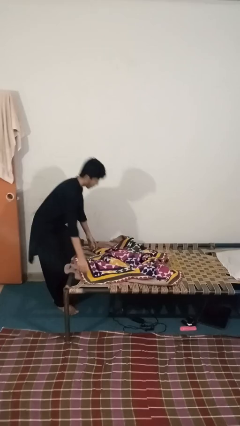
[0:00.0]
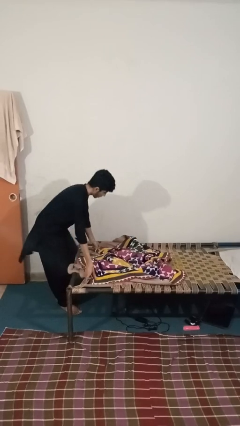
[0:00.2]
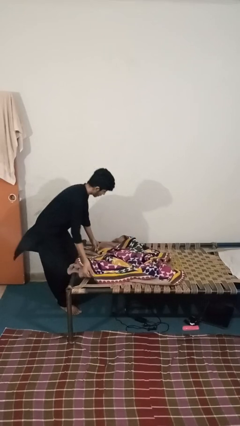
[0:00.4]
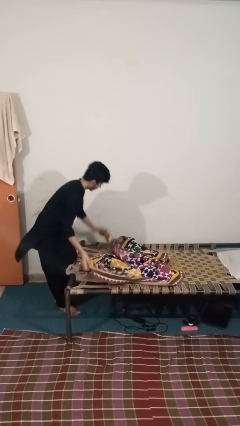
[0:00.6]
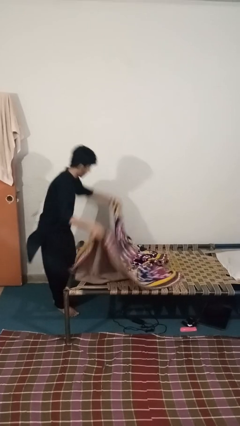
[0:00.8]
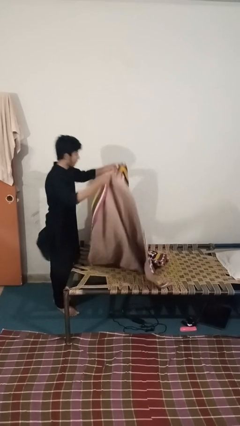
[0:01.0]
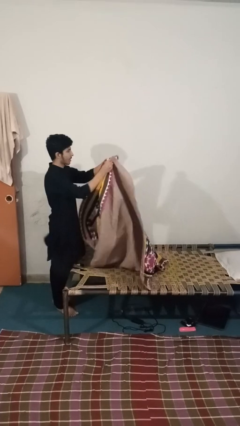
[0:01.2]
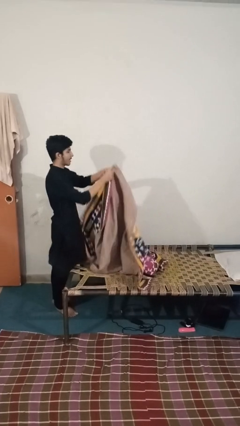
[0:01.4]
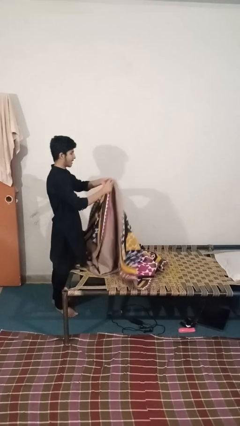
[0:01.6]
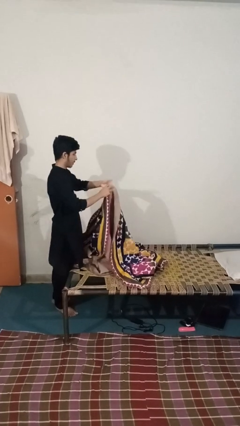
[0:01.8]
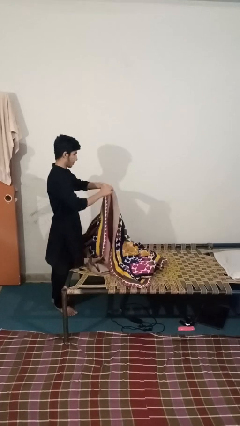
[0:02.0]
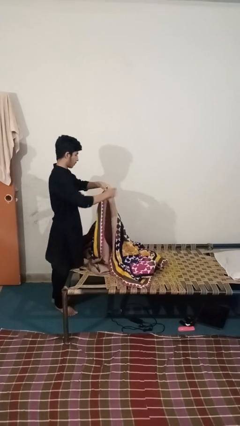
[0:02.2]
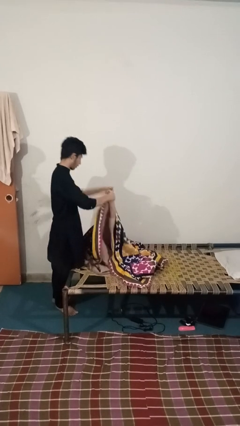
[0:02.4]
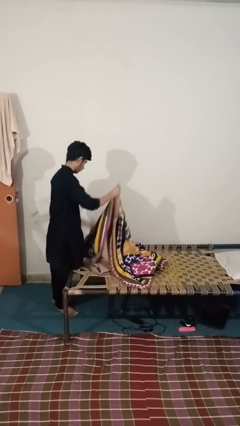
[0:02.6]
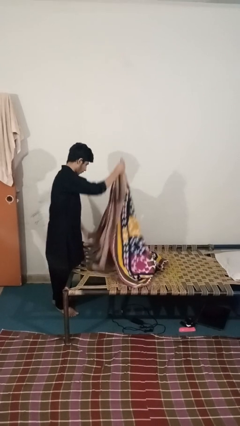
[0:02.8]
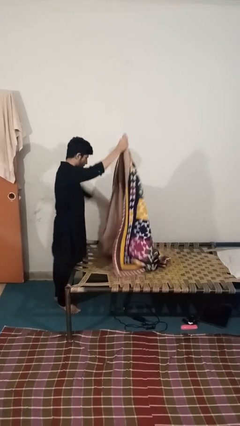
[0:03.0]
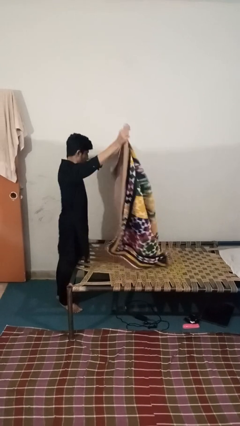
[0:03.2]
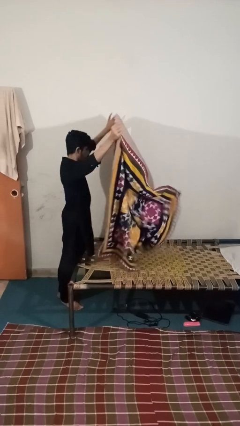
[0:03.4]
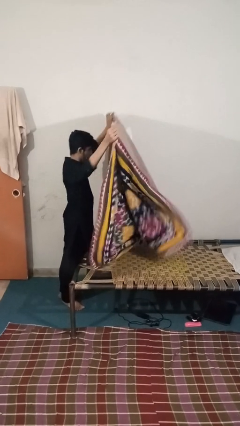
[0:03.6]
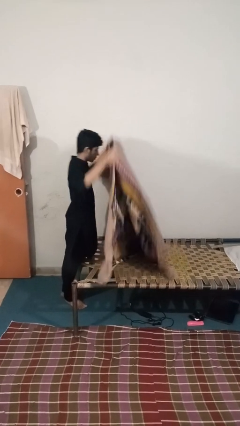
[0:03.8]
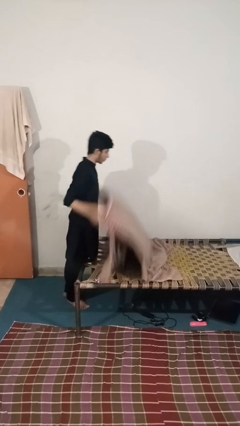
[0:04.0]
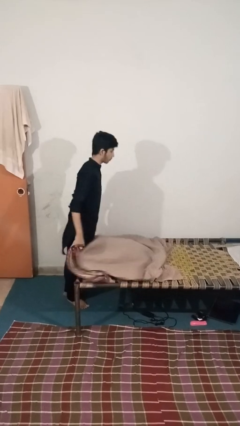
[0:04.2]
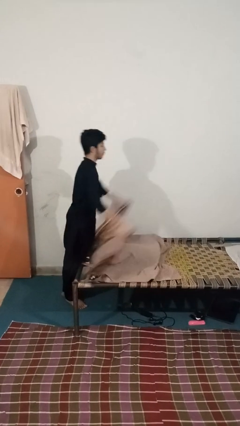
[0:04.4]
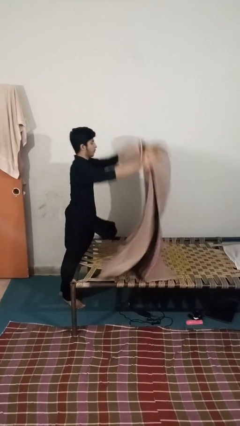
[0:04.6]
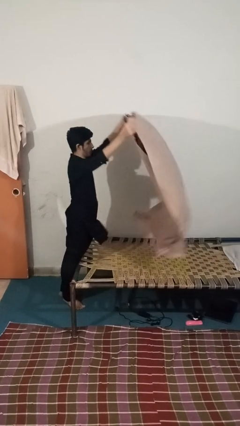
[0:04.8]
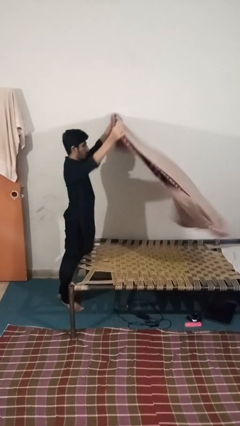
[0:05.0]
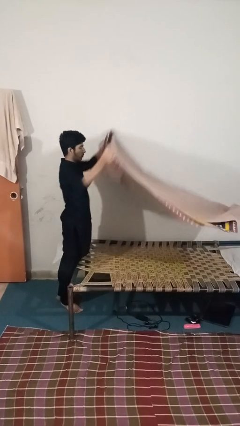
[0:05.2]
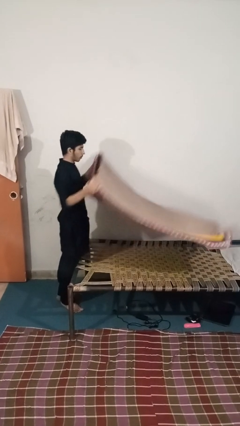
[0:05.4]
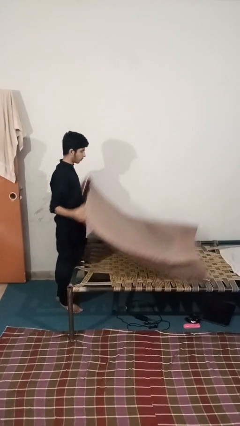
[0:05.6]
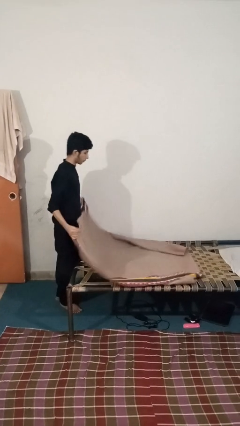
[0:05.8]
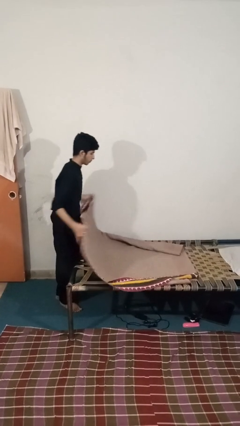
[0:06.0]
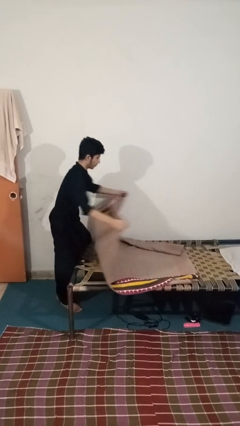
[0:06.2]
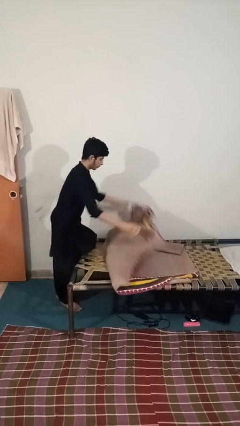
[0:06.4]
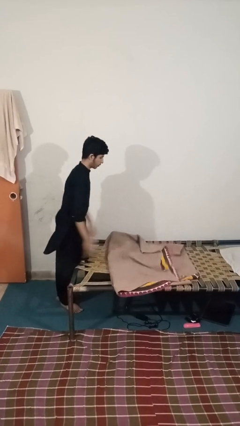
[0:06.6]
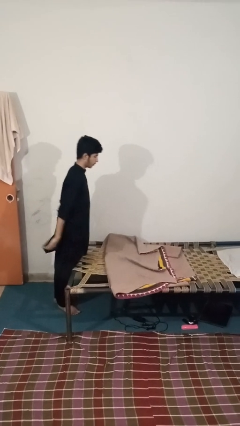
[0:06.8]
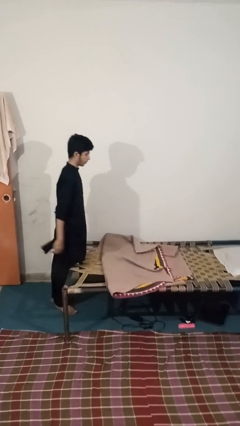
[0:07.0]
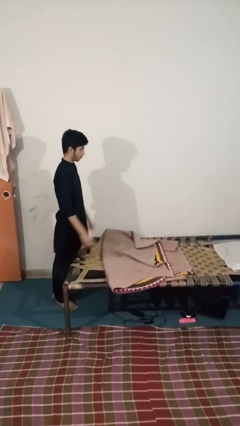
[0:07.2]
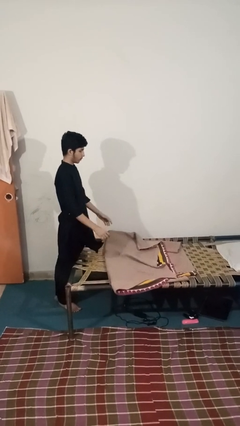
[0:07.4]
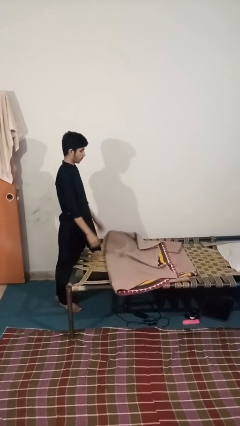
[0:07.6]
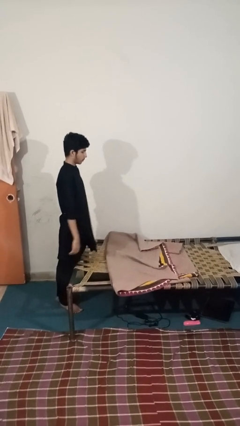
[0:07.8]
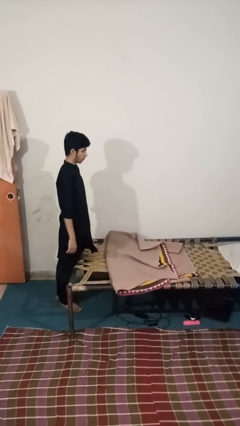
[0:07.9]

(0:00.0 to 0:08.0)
person folds blanket

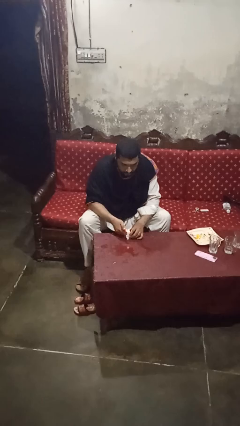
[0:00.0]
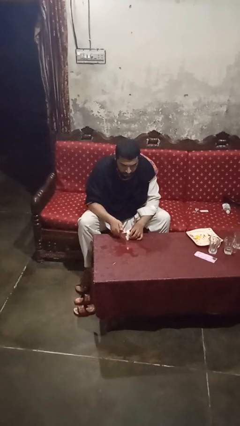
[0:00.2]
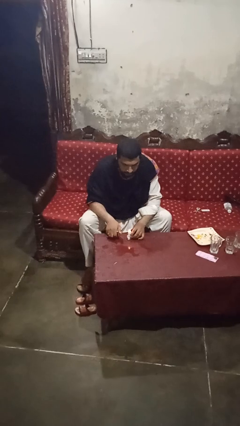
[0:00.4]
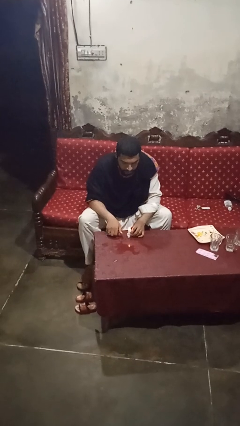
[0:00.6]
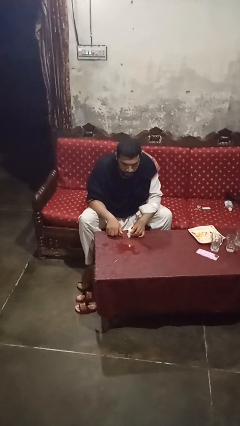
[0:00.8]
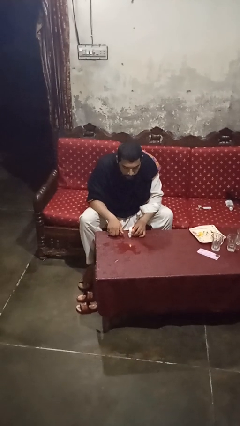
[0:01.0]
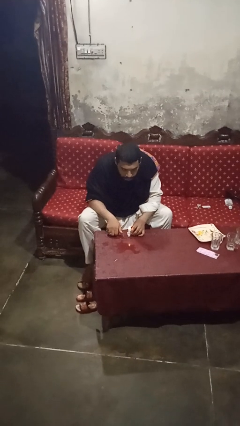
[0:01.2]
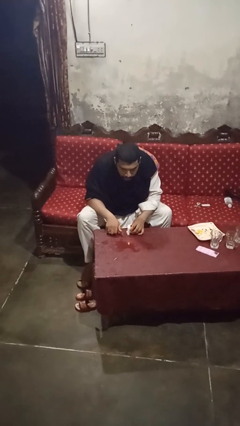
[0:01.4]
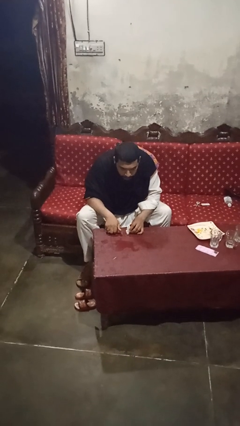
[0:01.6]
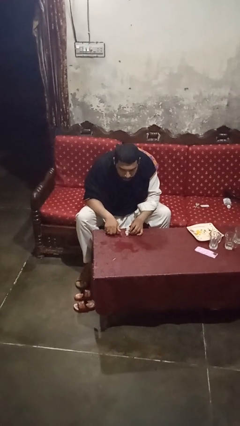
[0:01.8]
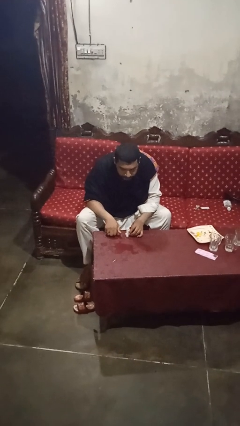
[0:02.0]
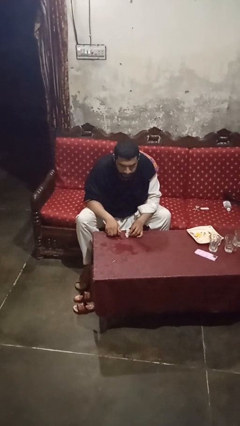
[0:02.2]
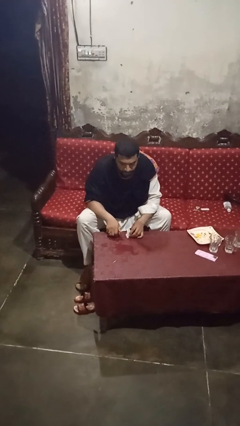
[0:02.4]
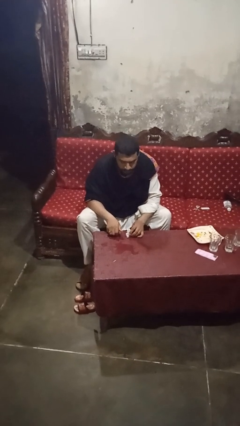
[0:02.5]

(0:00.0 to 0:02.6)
person extinguishes candle

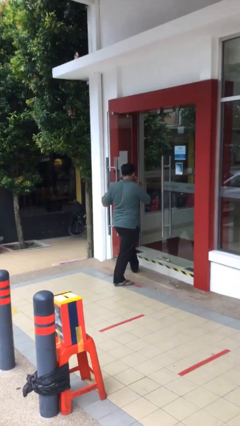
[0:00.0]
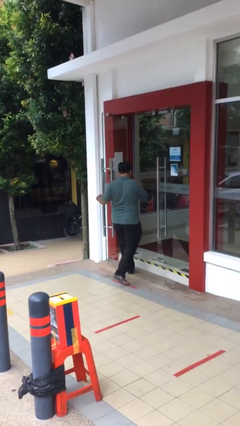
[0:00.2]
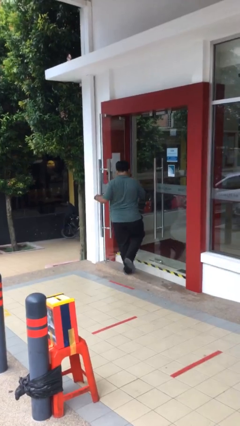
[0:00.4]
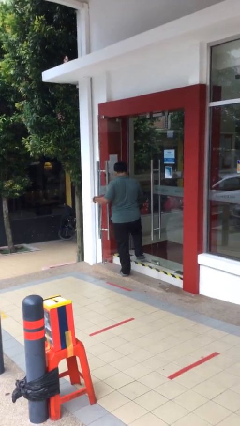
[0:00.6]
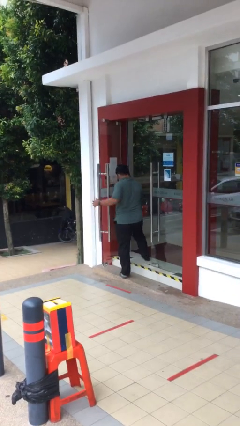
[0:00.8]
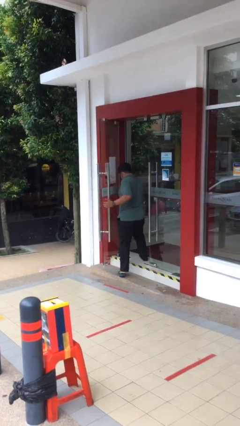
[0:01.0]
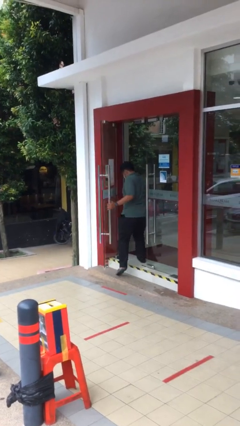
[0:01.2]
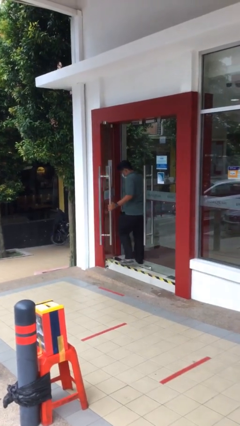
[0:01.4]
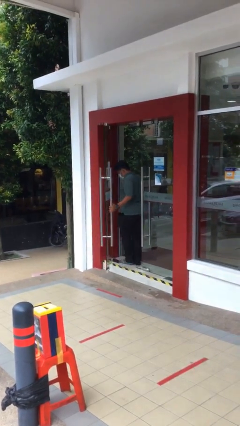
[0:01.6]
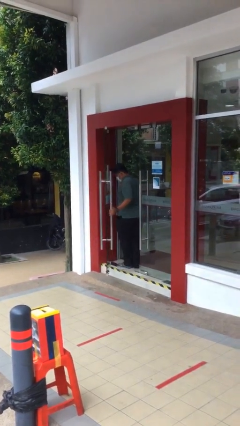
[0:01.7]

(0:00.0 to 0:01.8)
person exits scene through structure

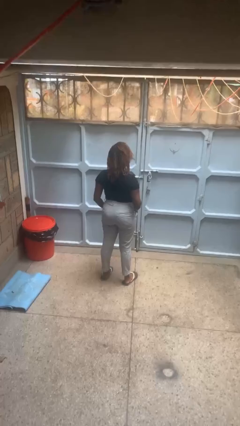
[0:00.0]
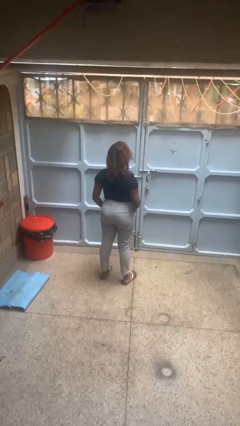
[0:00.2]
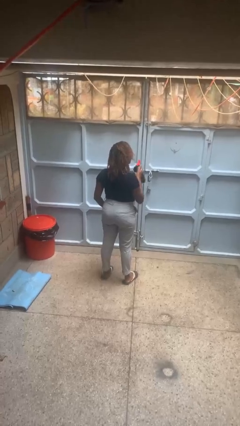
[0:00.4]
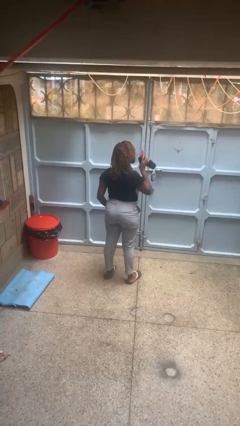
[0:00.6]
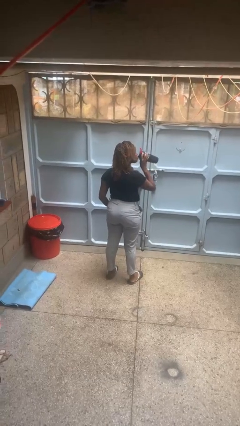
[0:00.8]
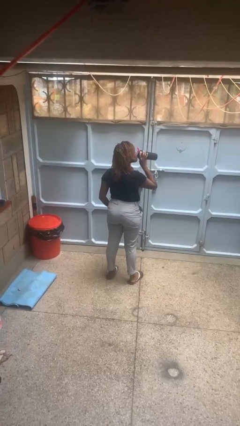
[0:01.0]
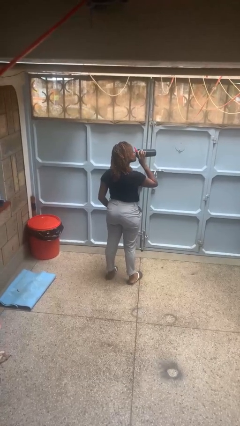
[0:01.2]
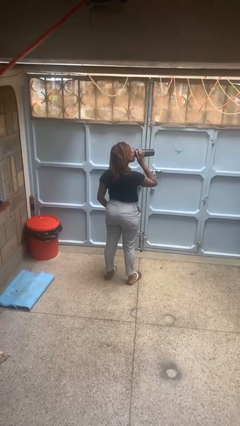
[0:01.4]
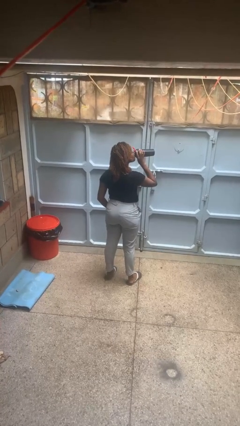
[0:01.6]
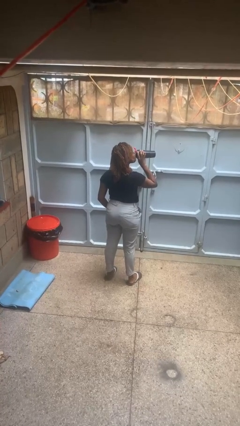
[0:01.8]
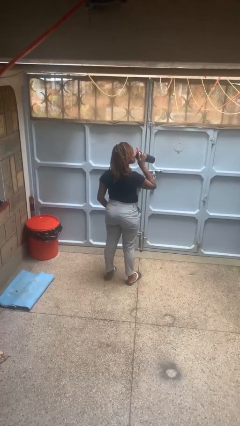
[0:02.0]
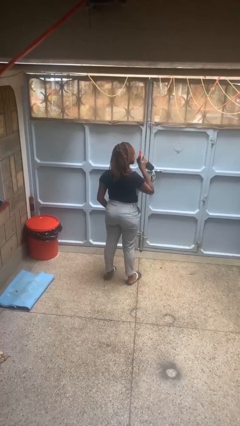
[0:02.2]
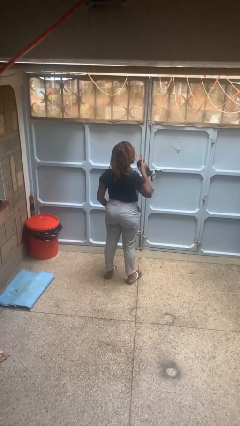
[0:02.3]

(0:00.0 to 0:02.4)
person drinks from bottle

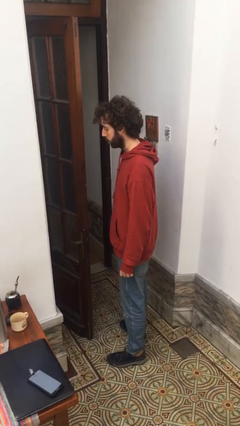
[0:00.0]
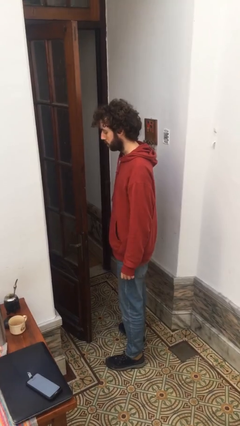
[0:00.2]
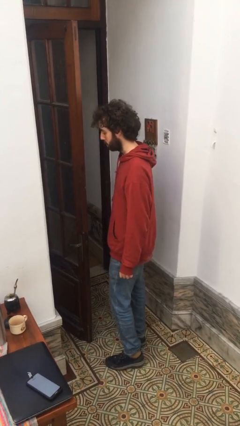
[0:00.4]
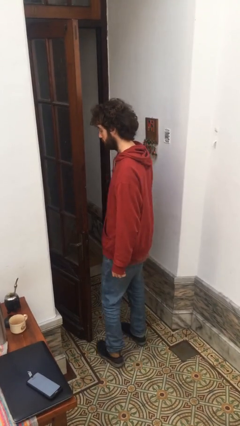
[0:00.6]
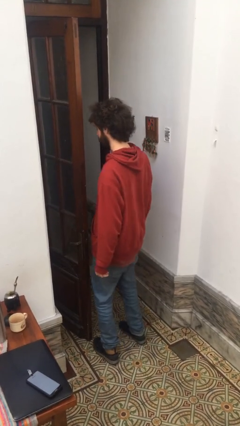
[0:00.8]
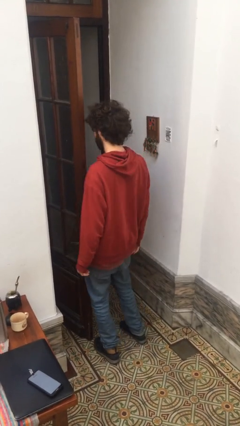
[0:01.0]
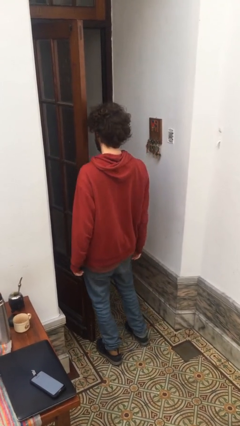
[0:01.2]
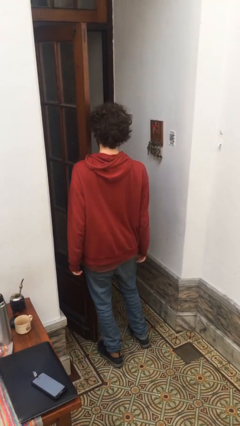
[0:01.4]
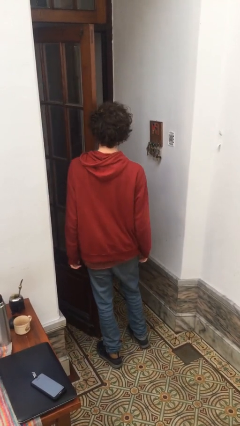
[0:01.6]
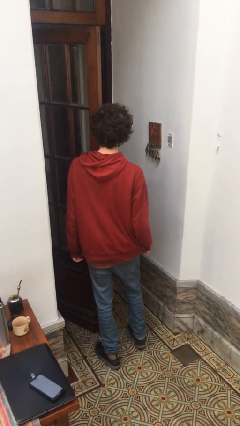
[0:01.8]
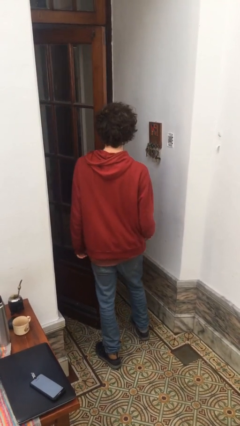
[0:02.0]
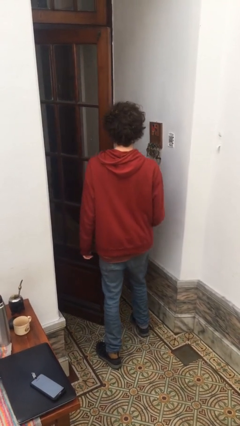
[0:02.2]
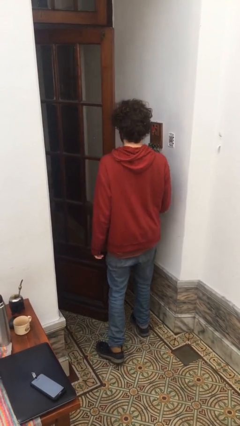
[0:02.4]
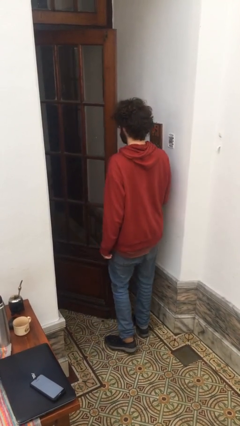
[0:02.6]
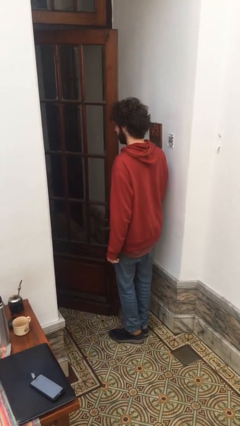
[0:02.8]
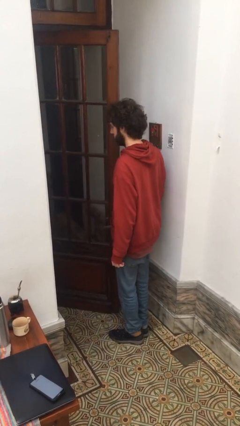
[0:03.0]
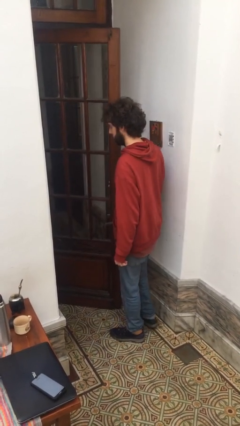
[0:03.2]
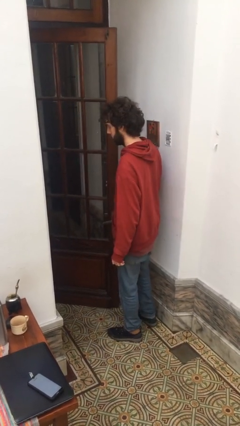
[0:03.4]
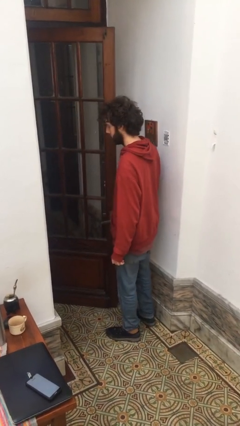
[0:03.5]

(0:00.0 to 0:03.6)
person closes door with hip
